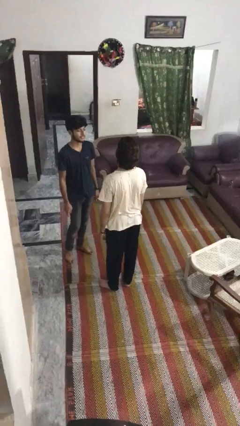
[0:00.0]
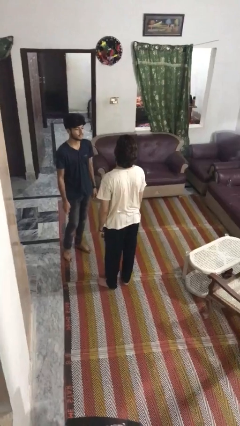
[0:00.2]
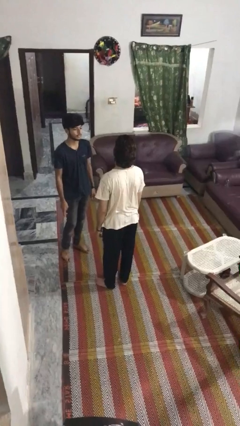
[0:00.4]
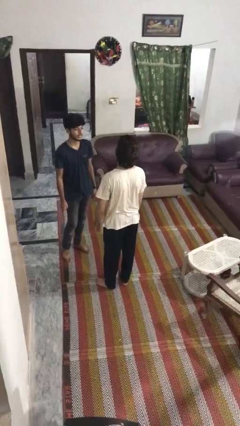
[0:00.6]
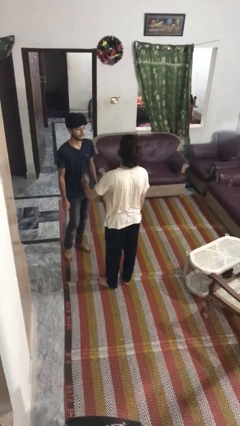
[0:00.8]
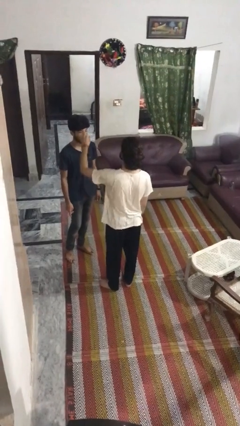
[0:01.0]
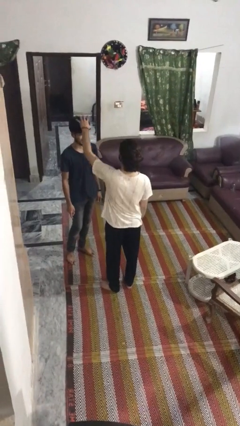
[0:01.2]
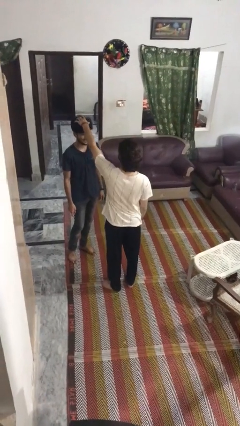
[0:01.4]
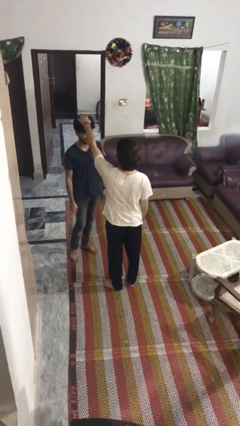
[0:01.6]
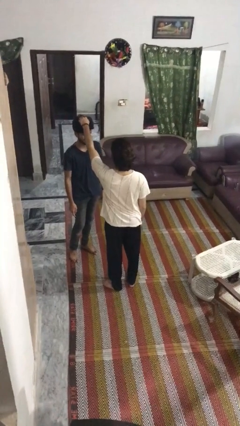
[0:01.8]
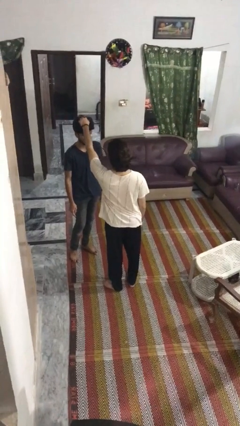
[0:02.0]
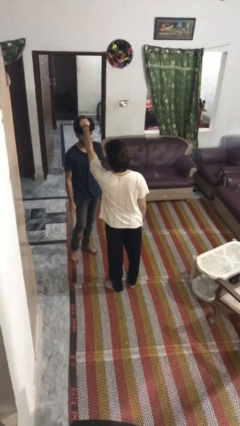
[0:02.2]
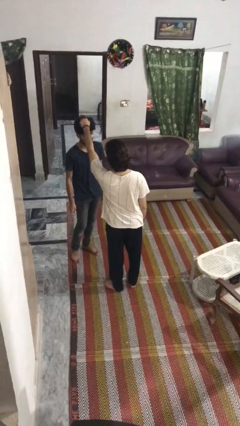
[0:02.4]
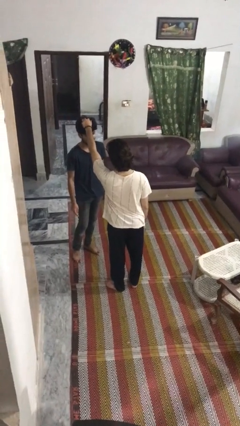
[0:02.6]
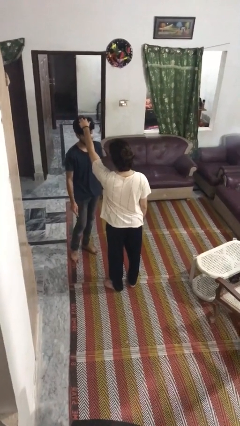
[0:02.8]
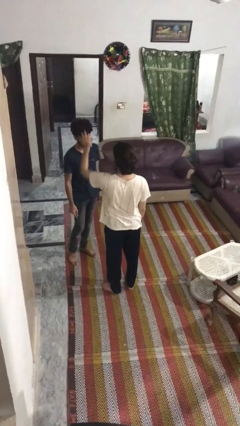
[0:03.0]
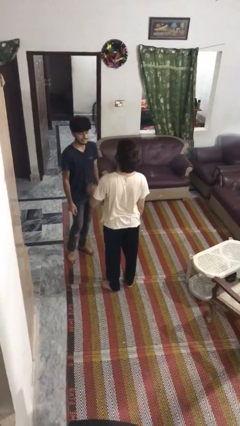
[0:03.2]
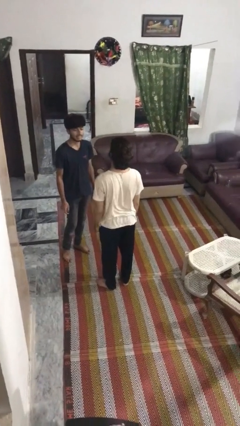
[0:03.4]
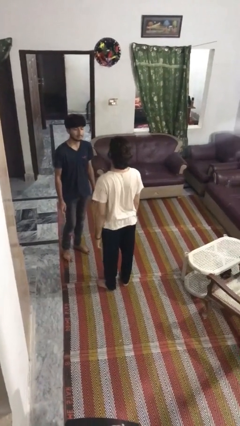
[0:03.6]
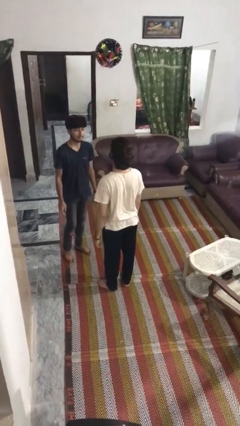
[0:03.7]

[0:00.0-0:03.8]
person grabs person by hair

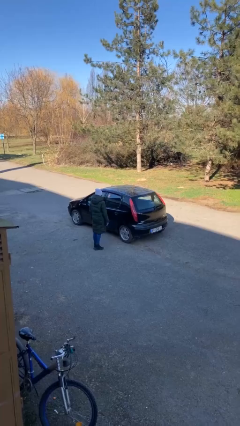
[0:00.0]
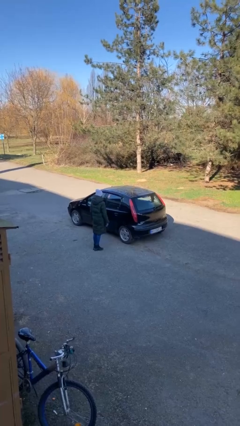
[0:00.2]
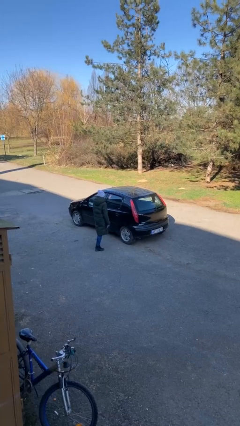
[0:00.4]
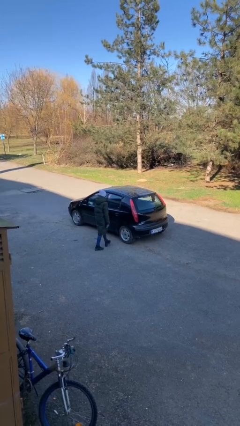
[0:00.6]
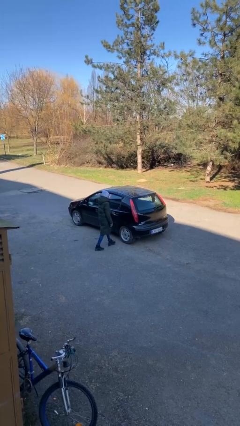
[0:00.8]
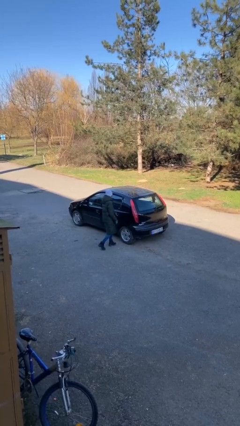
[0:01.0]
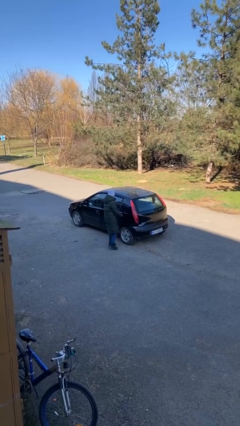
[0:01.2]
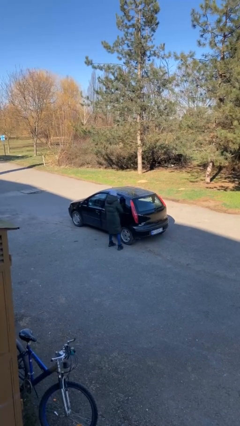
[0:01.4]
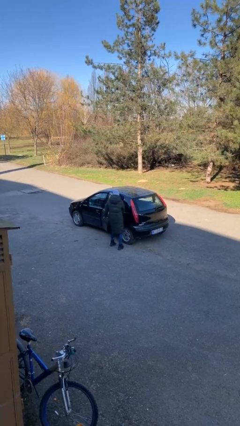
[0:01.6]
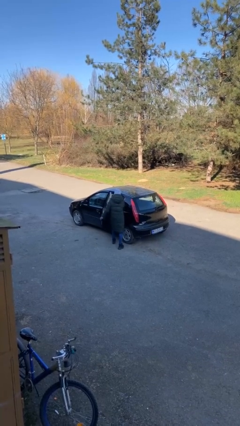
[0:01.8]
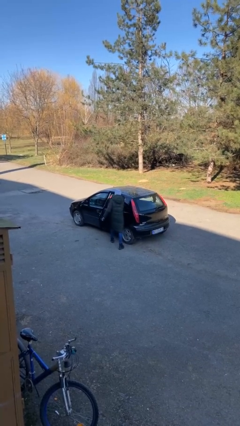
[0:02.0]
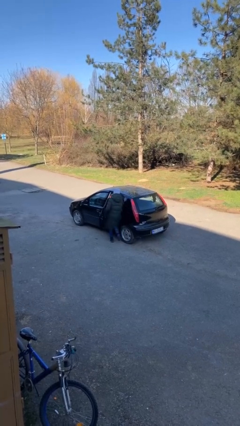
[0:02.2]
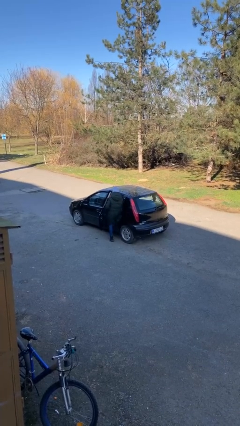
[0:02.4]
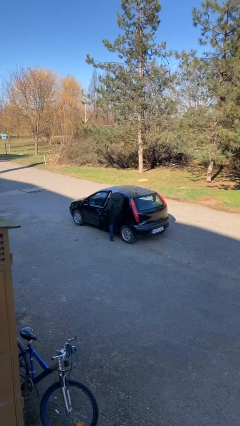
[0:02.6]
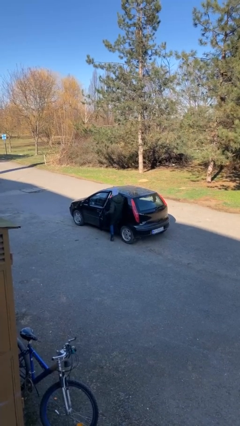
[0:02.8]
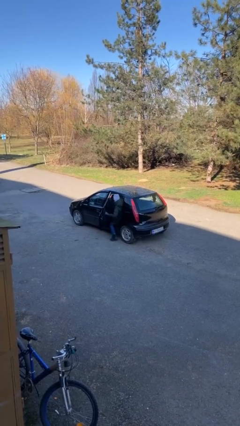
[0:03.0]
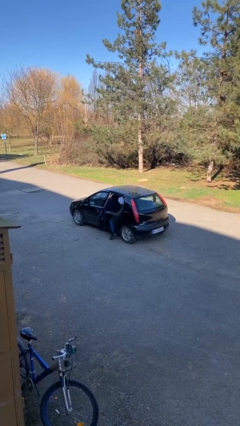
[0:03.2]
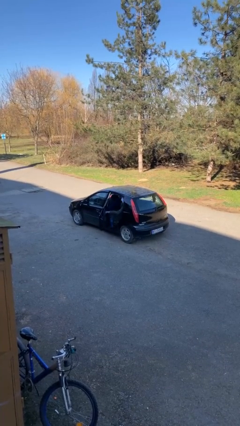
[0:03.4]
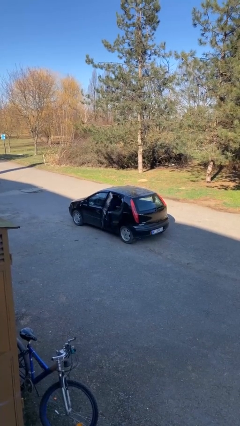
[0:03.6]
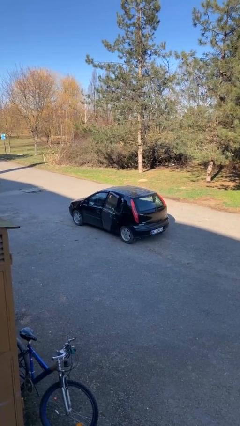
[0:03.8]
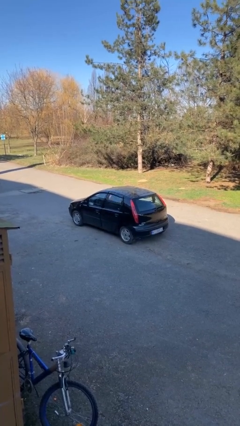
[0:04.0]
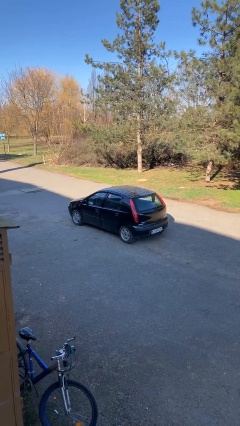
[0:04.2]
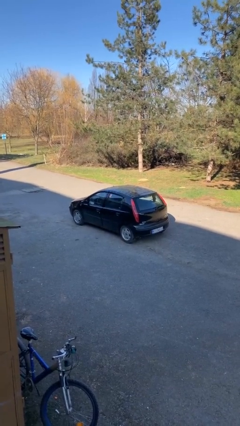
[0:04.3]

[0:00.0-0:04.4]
car picks up person

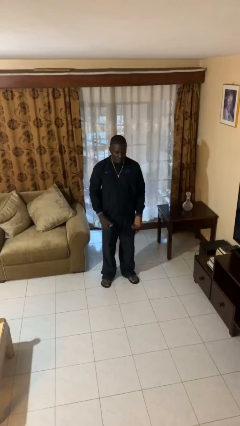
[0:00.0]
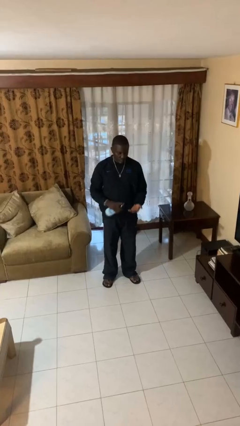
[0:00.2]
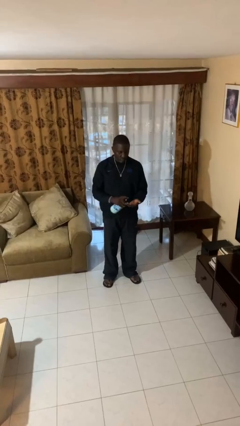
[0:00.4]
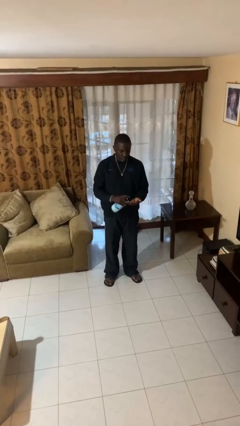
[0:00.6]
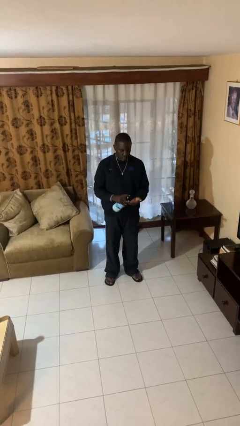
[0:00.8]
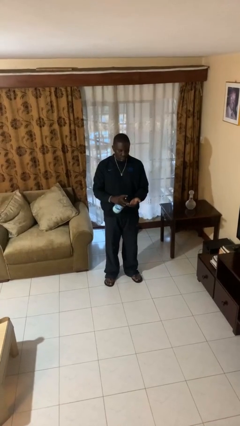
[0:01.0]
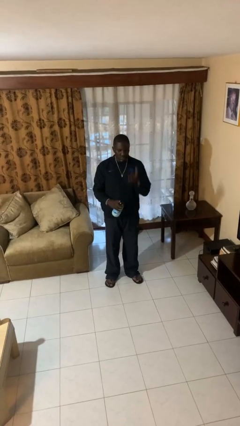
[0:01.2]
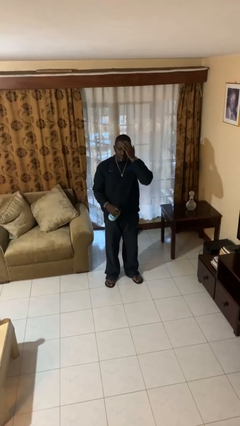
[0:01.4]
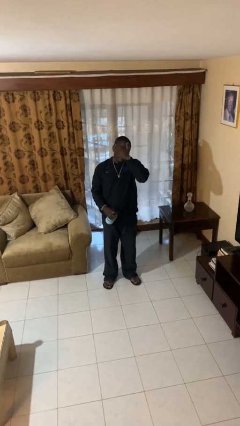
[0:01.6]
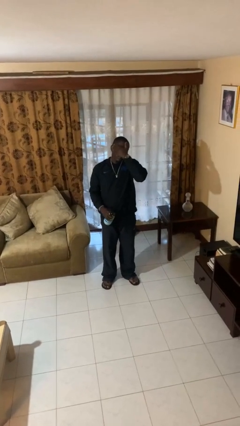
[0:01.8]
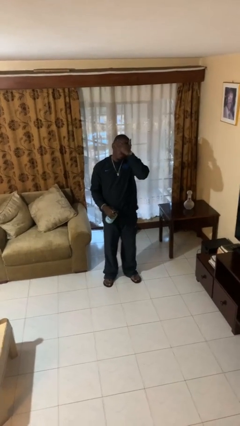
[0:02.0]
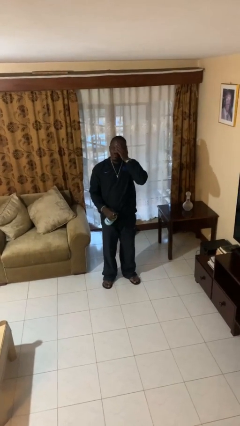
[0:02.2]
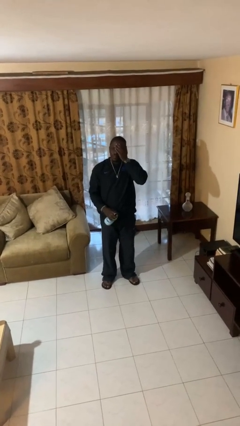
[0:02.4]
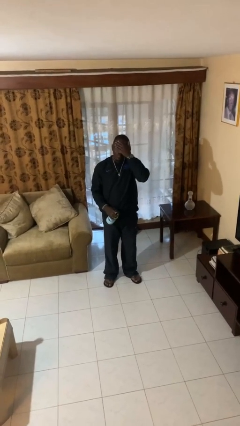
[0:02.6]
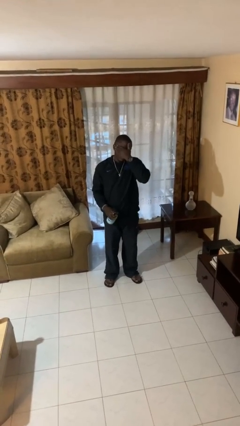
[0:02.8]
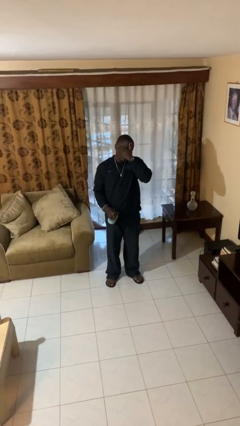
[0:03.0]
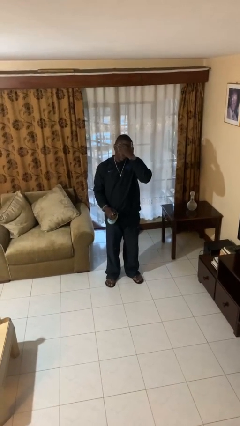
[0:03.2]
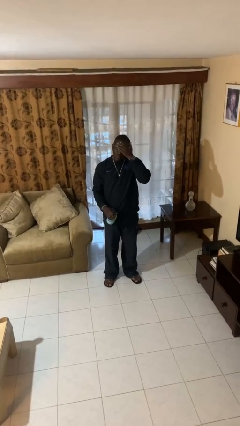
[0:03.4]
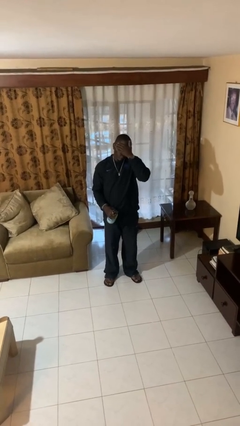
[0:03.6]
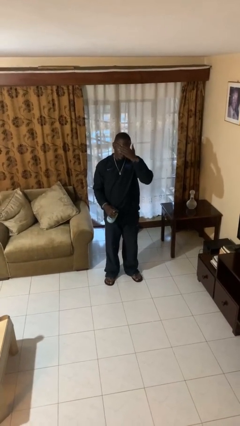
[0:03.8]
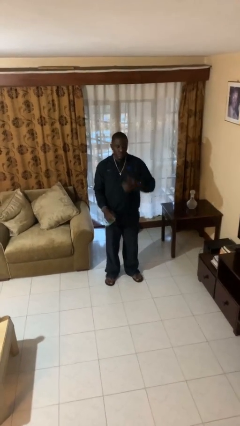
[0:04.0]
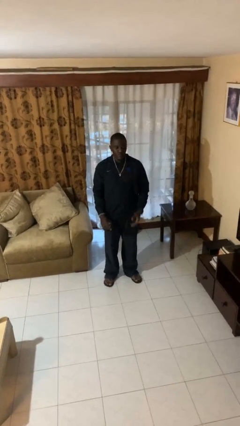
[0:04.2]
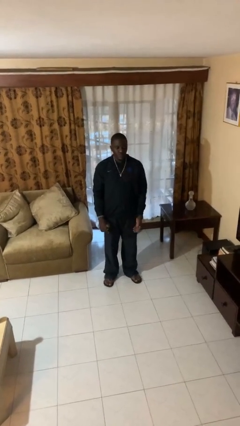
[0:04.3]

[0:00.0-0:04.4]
person applies facial moisturizer

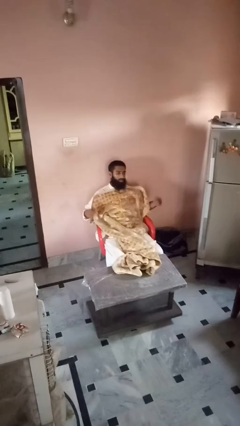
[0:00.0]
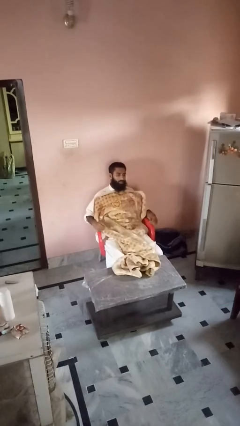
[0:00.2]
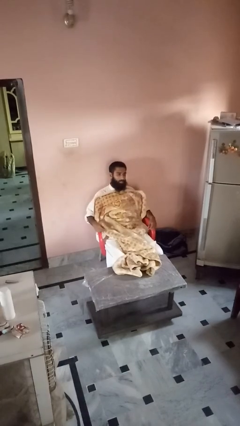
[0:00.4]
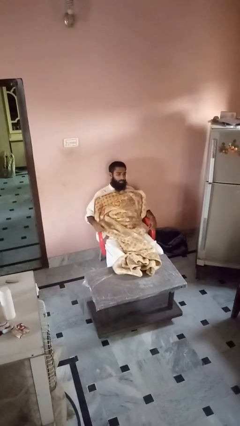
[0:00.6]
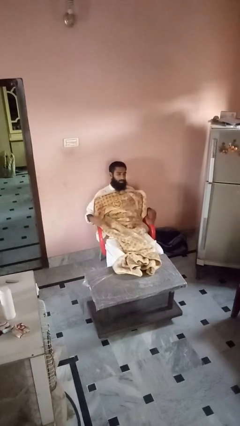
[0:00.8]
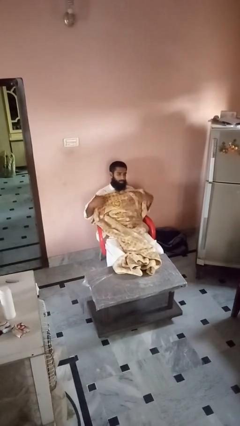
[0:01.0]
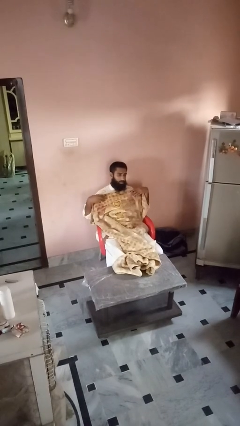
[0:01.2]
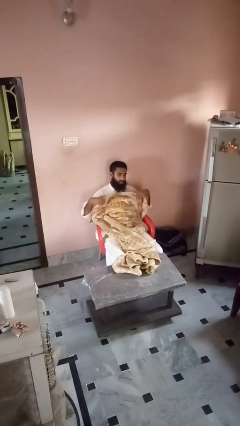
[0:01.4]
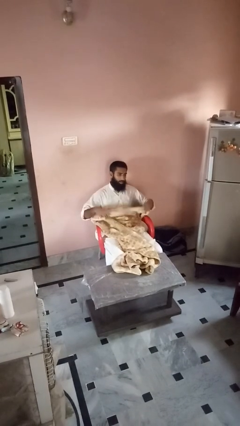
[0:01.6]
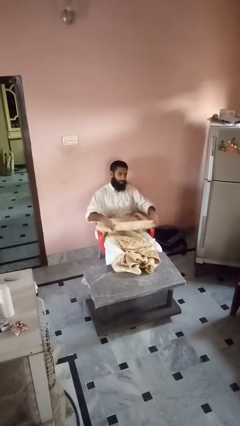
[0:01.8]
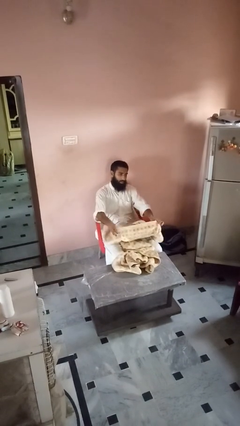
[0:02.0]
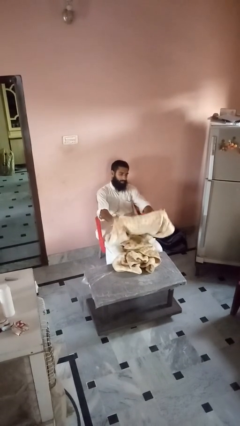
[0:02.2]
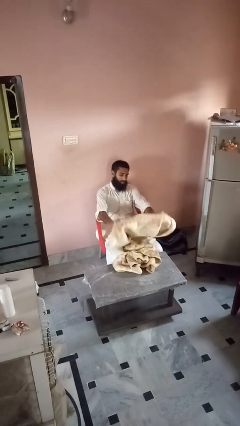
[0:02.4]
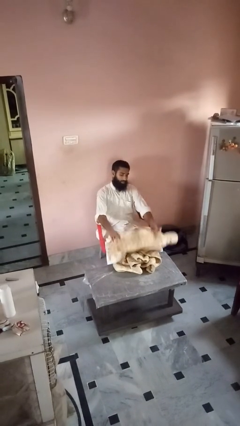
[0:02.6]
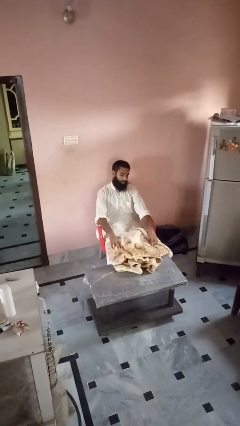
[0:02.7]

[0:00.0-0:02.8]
person uncovers with blanket

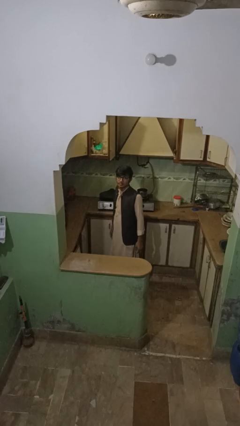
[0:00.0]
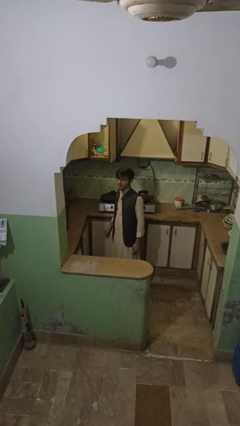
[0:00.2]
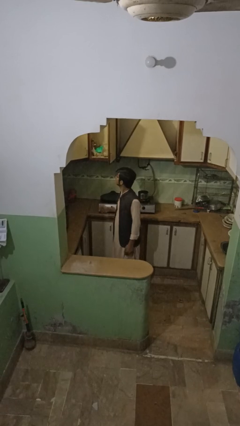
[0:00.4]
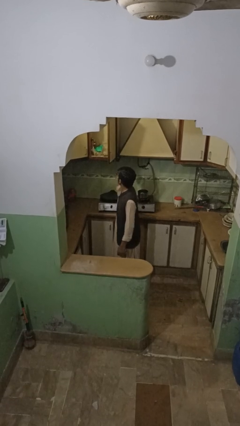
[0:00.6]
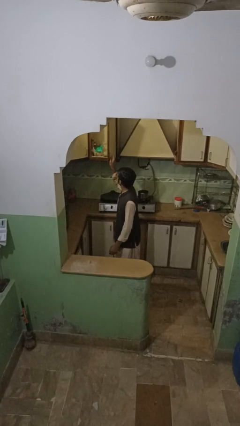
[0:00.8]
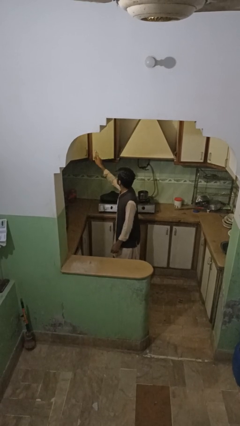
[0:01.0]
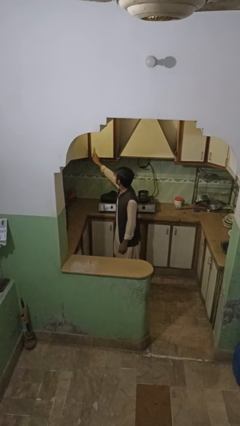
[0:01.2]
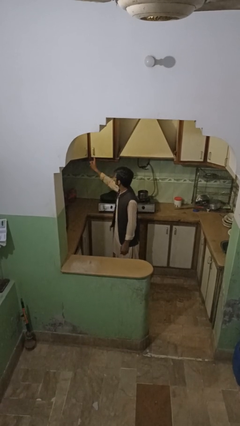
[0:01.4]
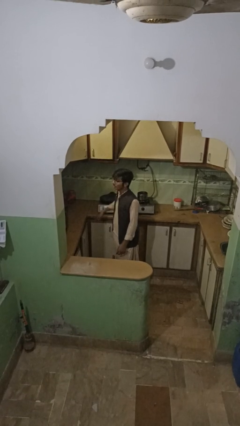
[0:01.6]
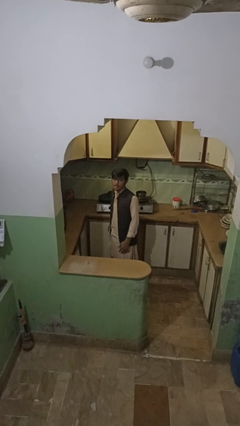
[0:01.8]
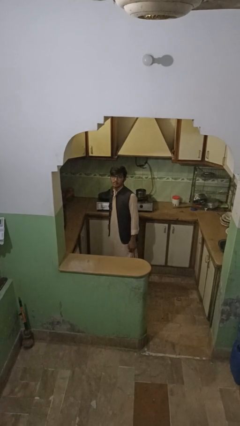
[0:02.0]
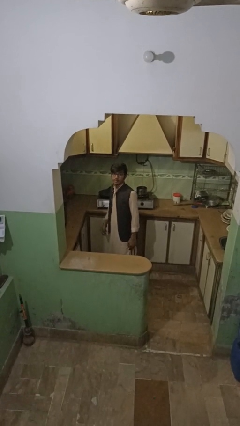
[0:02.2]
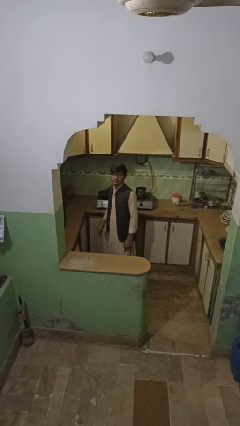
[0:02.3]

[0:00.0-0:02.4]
person closes cabinet
